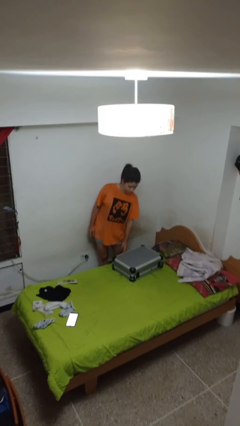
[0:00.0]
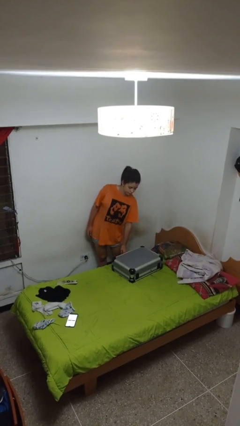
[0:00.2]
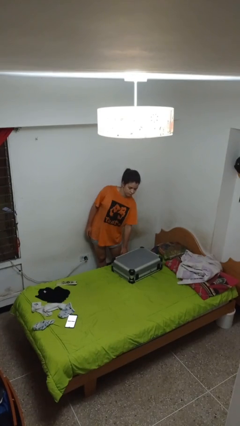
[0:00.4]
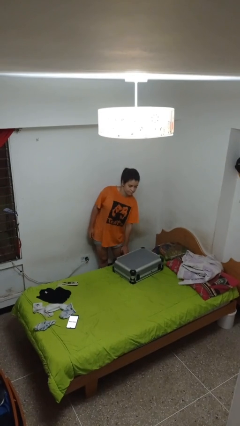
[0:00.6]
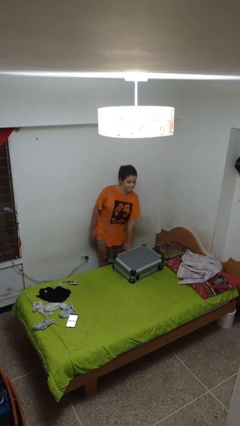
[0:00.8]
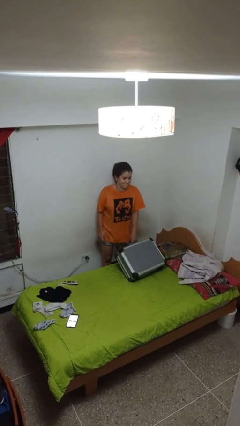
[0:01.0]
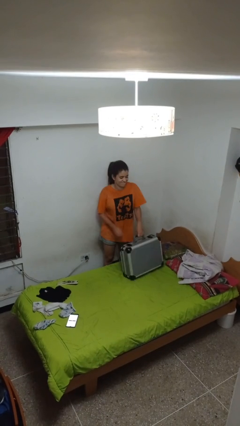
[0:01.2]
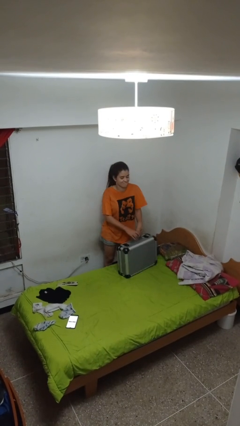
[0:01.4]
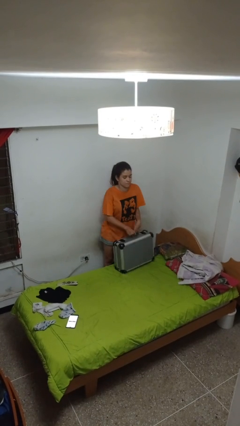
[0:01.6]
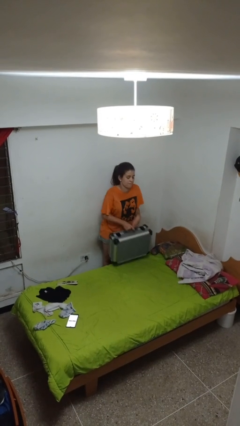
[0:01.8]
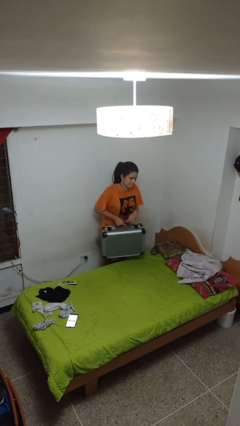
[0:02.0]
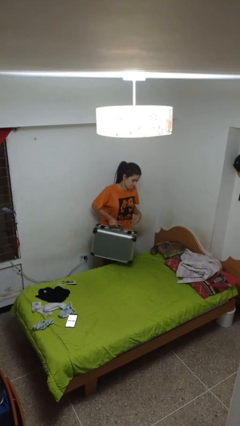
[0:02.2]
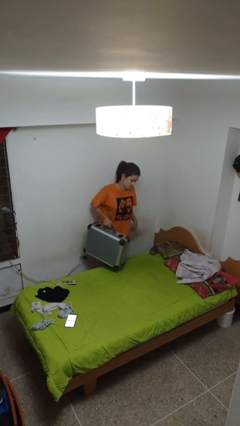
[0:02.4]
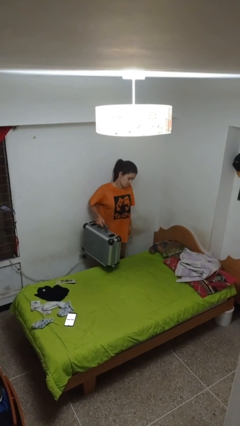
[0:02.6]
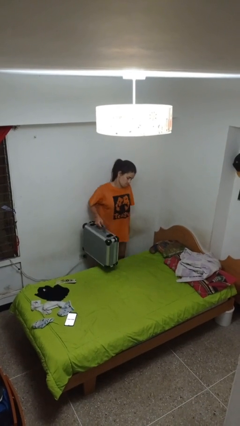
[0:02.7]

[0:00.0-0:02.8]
person picks up object from bed

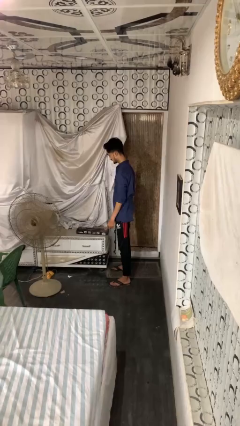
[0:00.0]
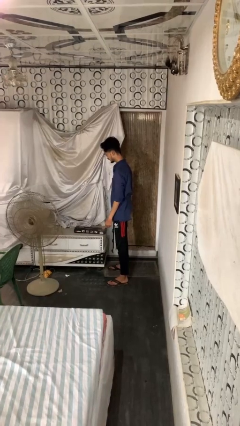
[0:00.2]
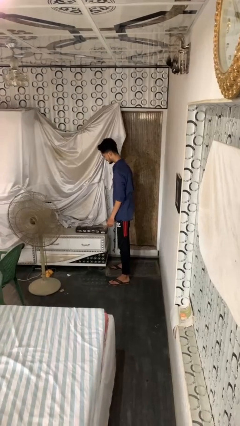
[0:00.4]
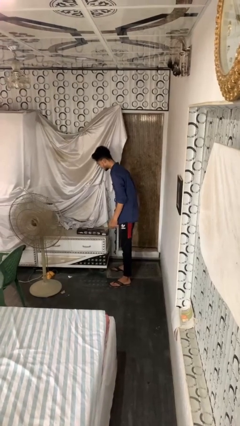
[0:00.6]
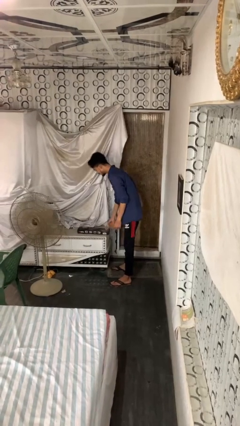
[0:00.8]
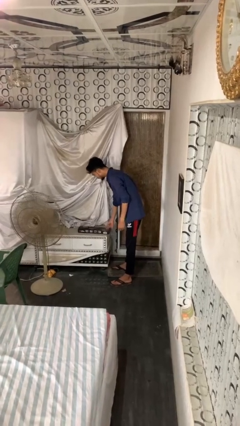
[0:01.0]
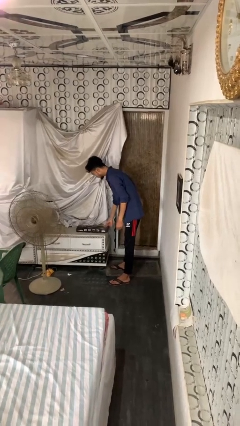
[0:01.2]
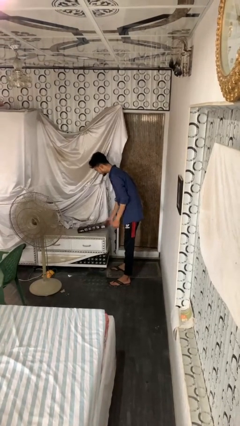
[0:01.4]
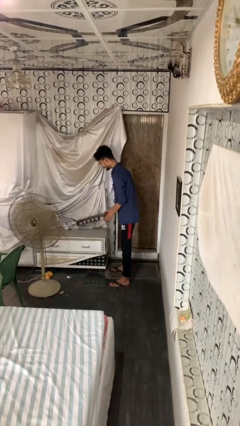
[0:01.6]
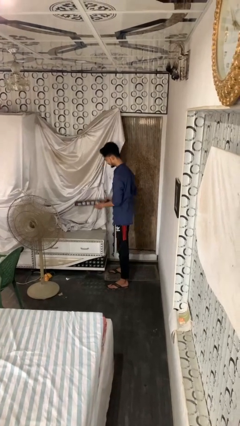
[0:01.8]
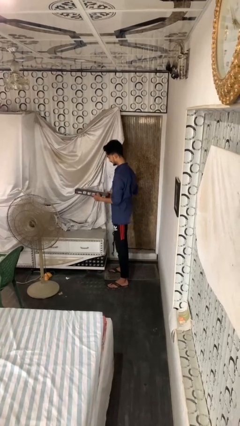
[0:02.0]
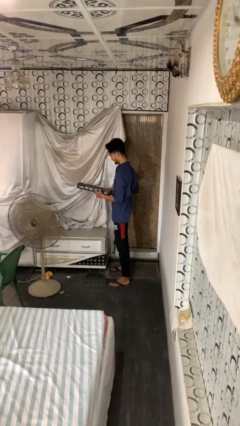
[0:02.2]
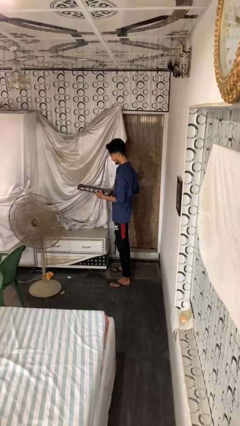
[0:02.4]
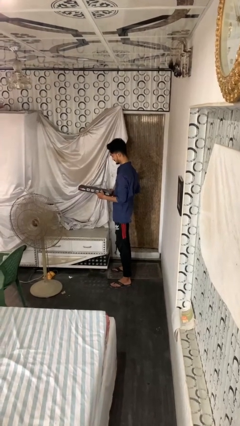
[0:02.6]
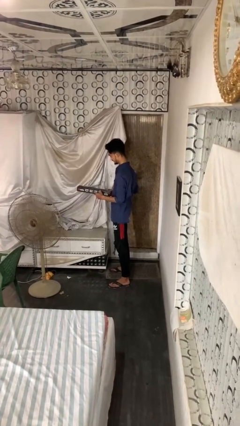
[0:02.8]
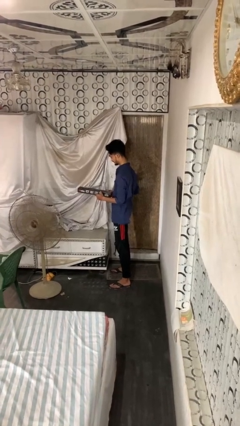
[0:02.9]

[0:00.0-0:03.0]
person picks up object from countertop

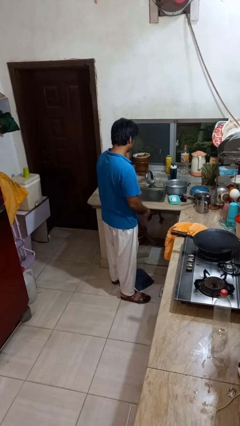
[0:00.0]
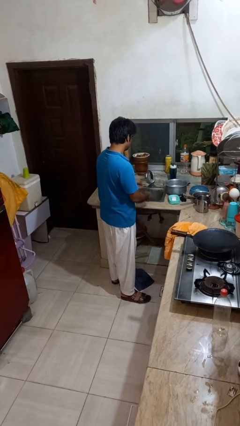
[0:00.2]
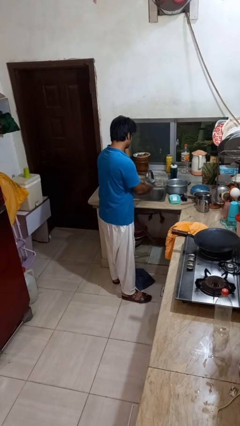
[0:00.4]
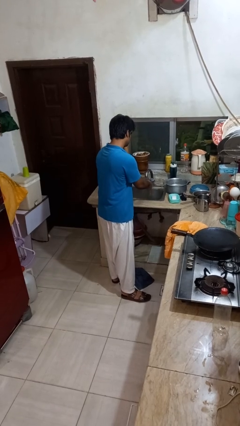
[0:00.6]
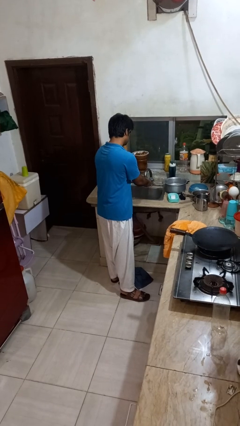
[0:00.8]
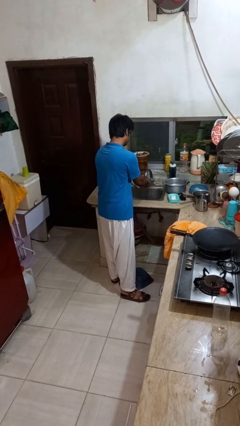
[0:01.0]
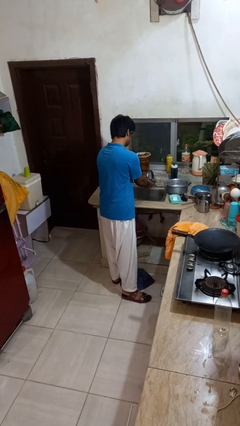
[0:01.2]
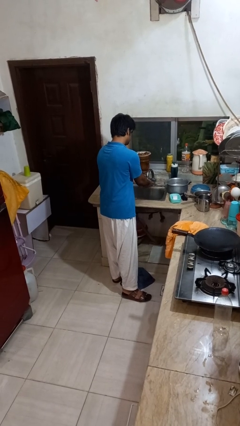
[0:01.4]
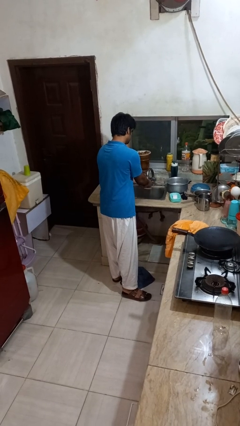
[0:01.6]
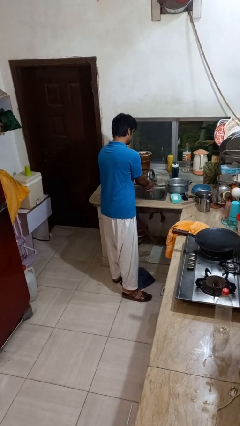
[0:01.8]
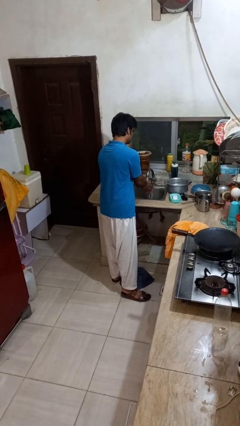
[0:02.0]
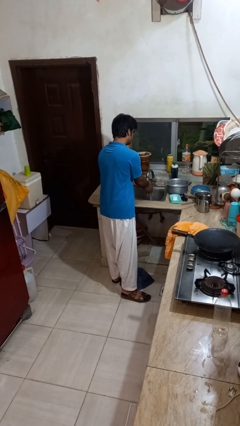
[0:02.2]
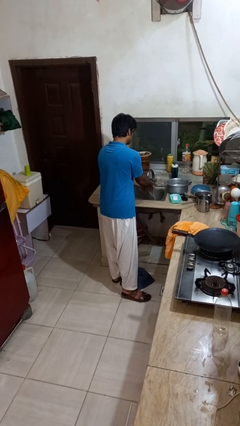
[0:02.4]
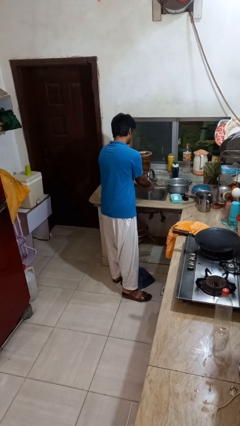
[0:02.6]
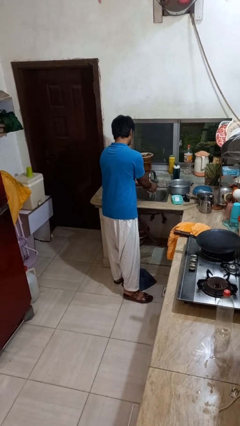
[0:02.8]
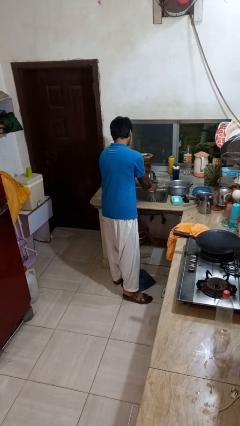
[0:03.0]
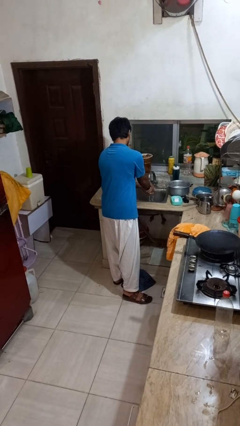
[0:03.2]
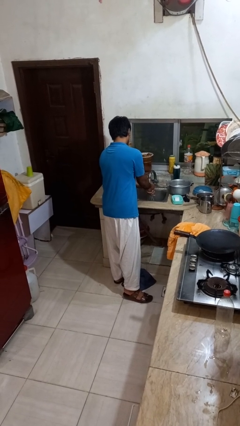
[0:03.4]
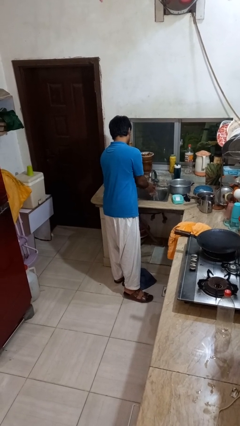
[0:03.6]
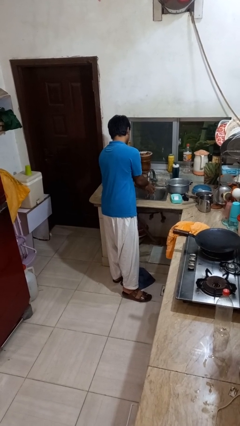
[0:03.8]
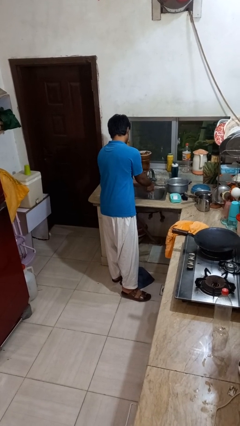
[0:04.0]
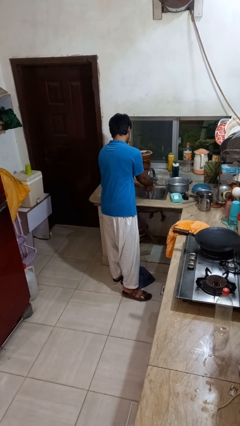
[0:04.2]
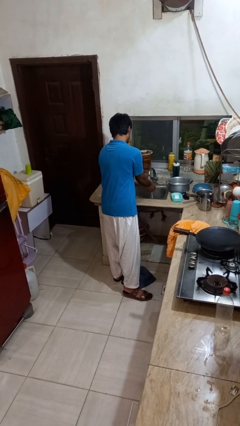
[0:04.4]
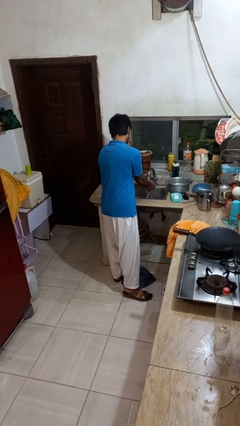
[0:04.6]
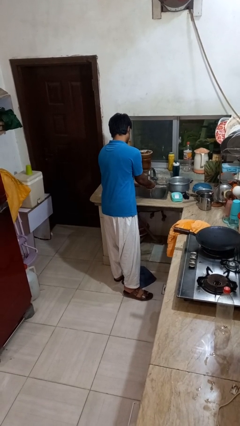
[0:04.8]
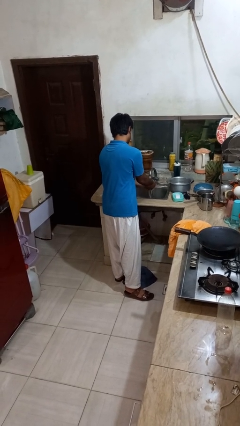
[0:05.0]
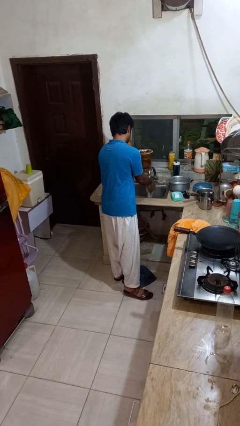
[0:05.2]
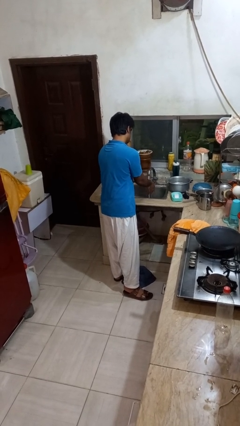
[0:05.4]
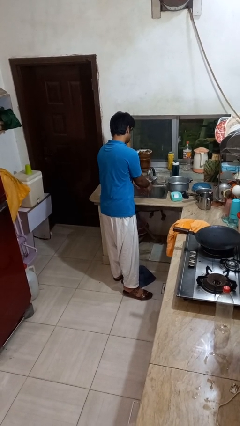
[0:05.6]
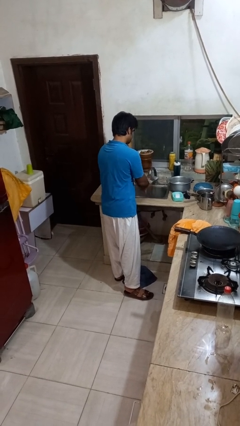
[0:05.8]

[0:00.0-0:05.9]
person washes hands

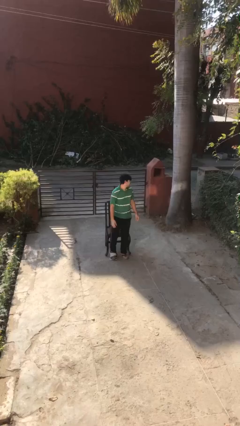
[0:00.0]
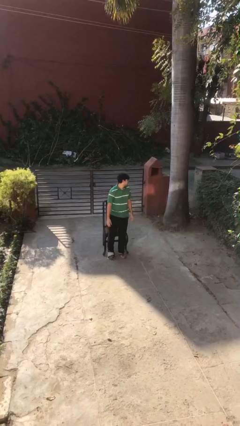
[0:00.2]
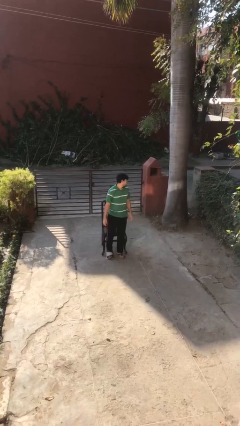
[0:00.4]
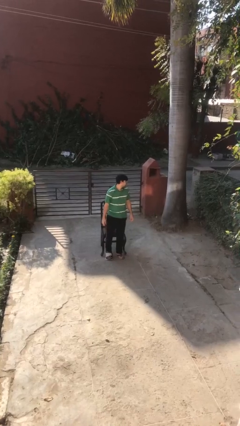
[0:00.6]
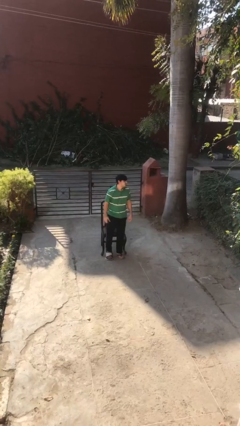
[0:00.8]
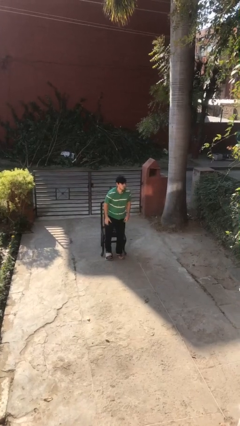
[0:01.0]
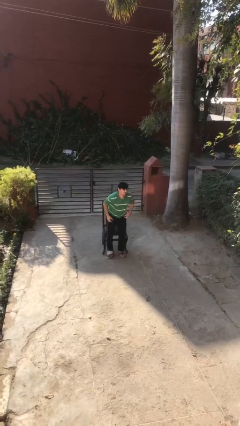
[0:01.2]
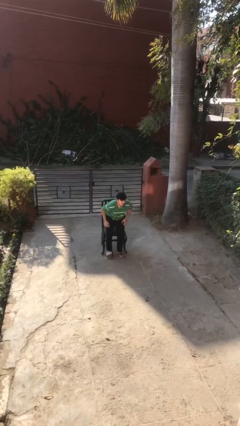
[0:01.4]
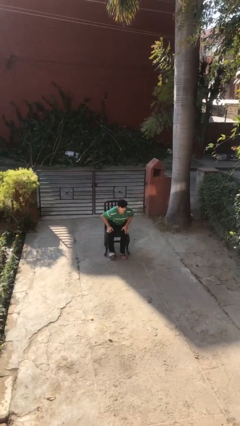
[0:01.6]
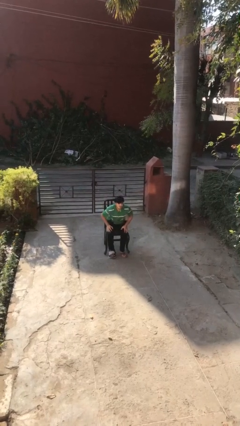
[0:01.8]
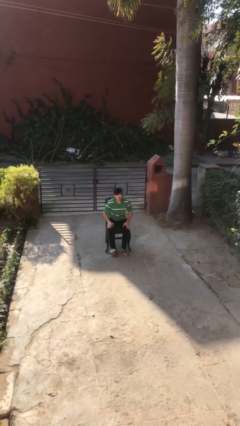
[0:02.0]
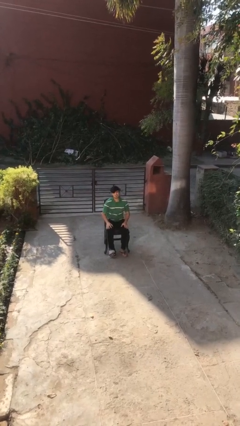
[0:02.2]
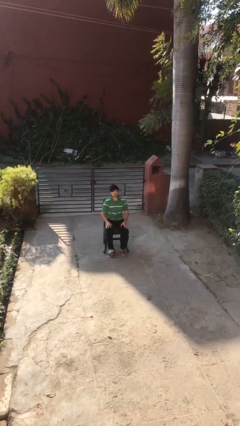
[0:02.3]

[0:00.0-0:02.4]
person sits down

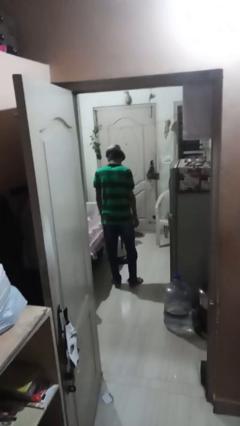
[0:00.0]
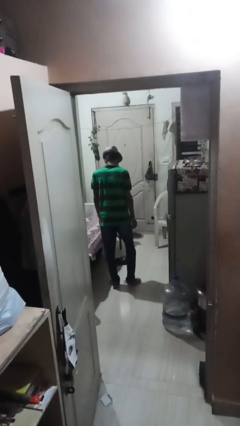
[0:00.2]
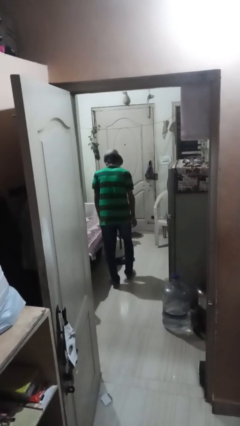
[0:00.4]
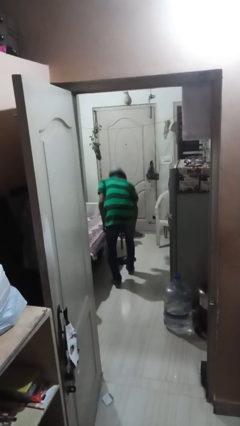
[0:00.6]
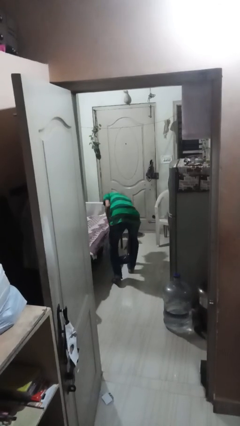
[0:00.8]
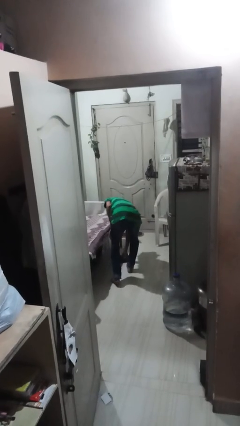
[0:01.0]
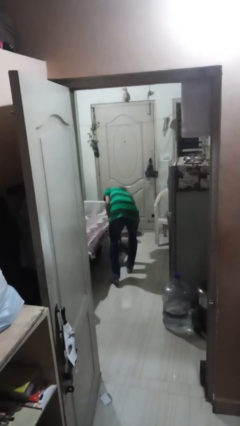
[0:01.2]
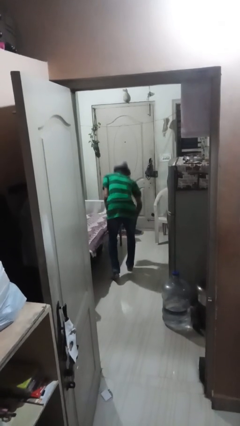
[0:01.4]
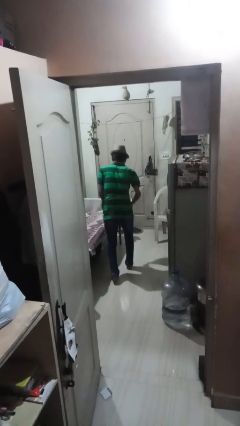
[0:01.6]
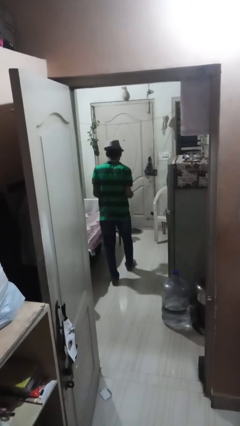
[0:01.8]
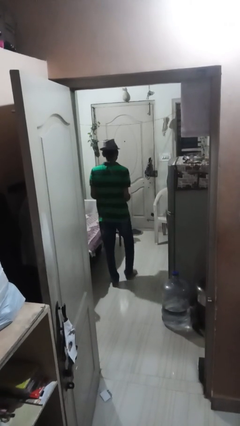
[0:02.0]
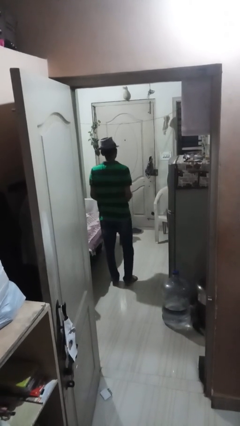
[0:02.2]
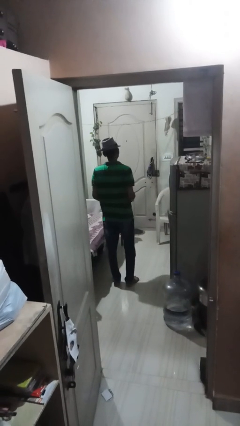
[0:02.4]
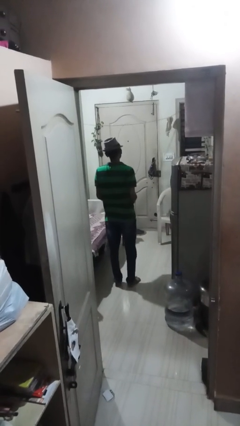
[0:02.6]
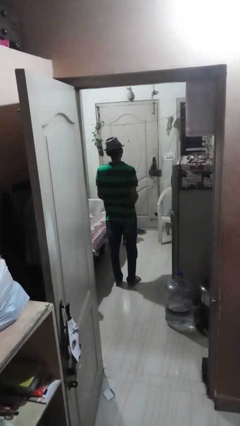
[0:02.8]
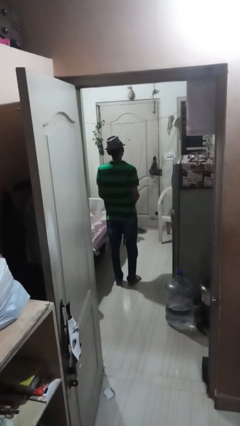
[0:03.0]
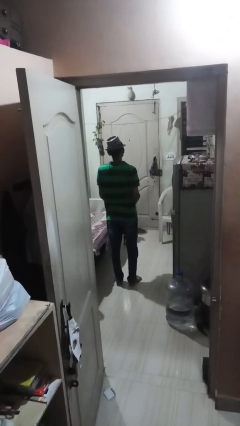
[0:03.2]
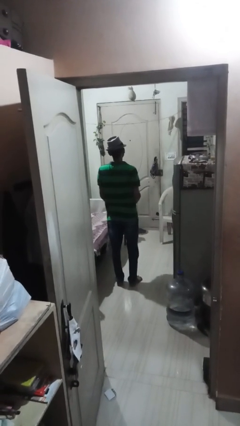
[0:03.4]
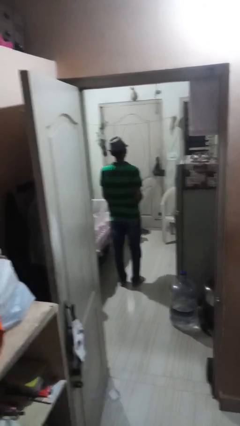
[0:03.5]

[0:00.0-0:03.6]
person picks up object from floor
